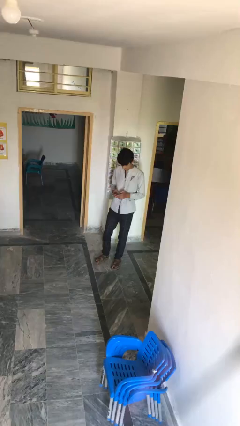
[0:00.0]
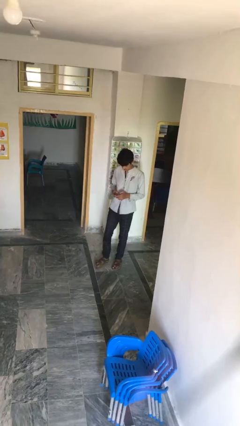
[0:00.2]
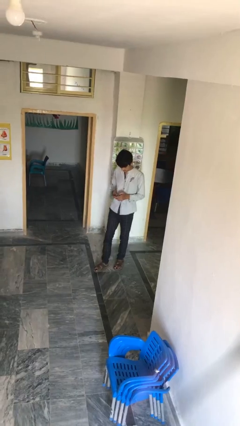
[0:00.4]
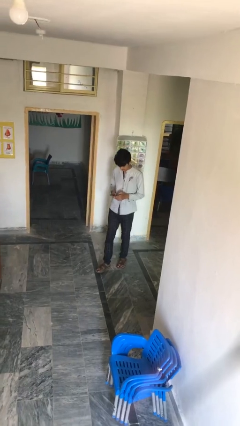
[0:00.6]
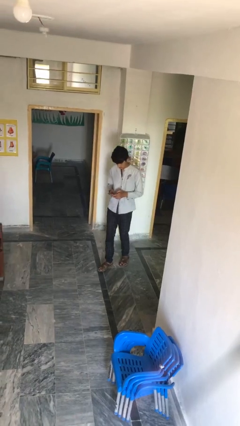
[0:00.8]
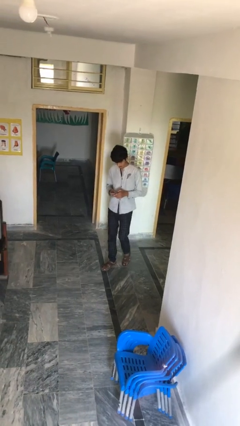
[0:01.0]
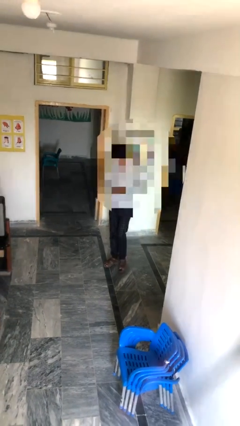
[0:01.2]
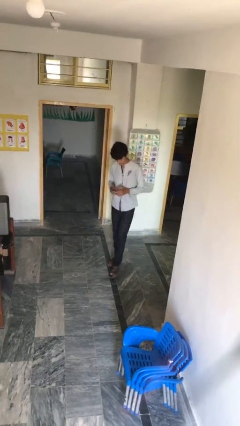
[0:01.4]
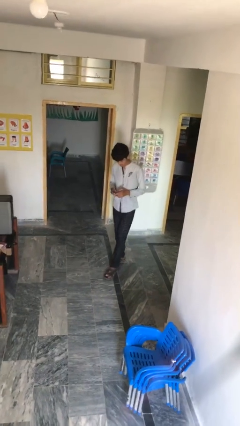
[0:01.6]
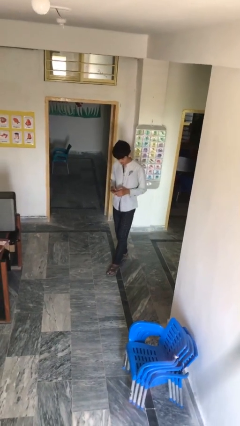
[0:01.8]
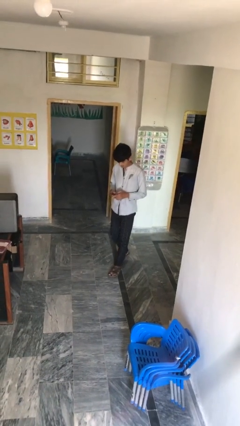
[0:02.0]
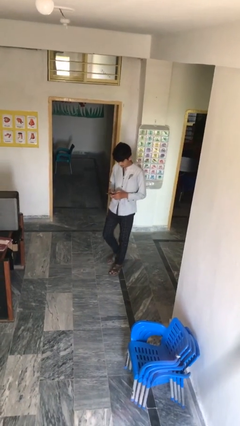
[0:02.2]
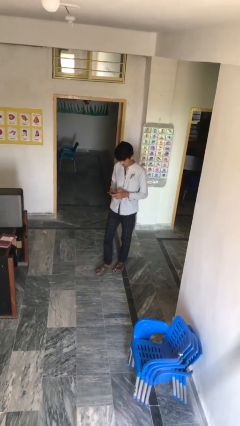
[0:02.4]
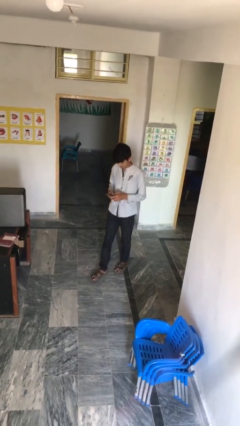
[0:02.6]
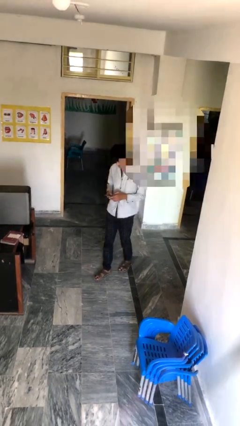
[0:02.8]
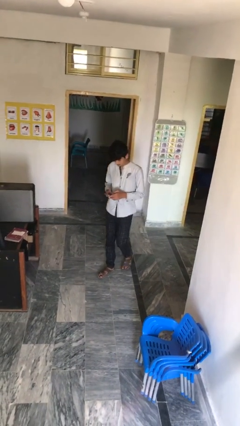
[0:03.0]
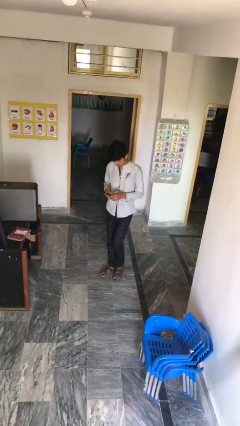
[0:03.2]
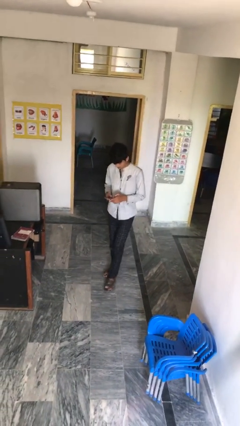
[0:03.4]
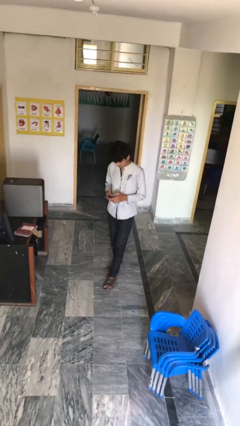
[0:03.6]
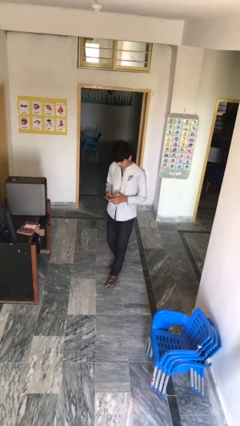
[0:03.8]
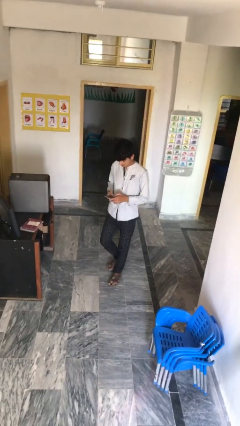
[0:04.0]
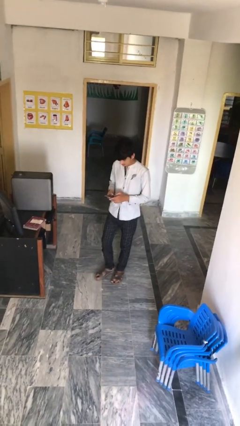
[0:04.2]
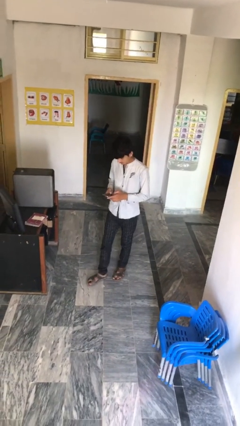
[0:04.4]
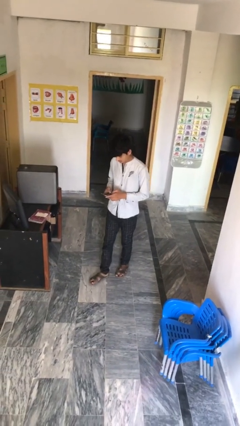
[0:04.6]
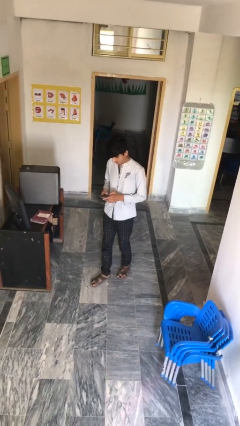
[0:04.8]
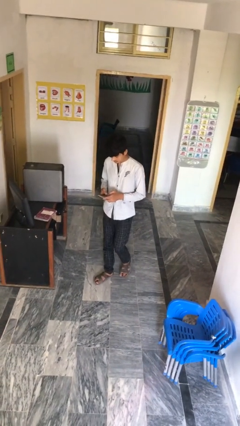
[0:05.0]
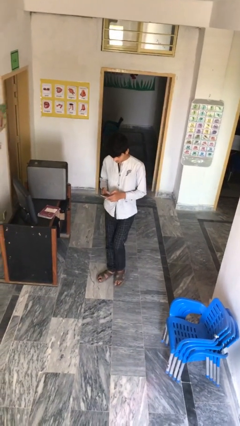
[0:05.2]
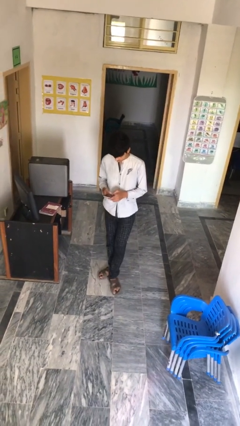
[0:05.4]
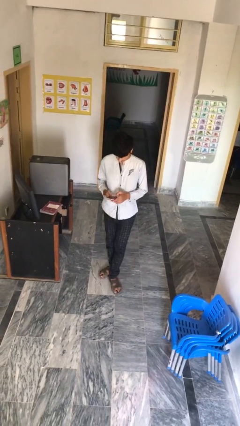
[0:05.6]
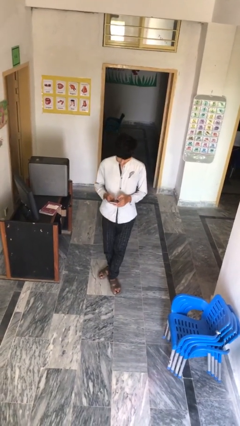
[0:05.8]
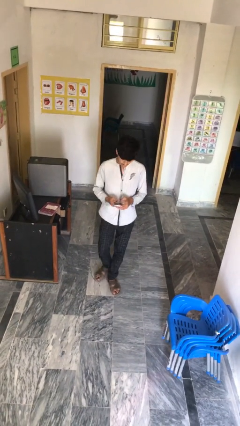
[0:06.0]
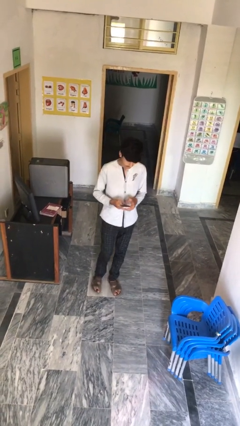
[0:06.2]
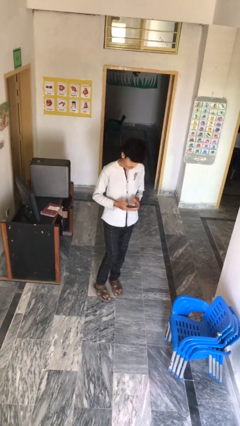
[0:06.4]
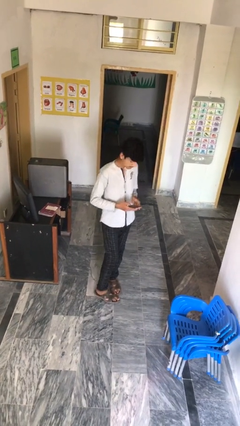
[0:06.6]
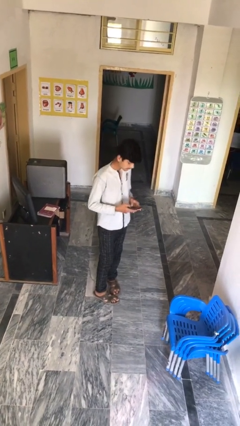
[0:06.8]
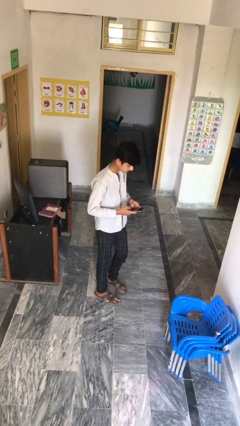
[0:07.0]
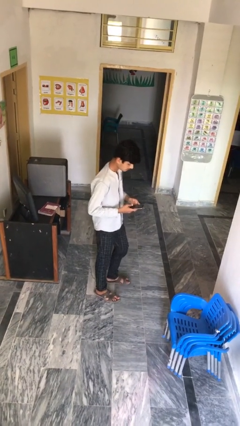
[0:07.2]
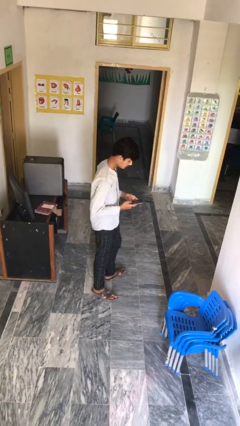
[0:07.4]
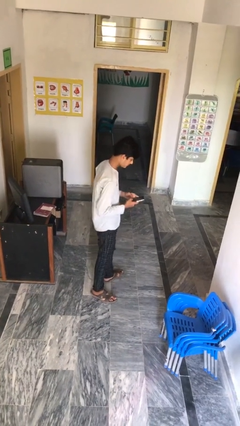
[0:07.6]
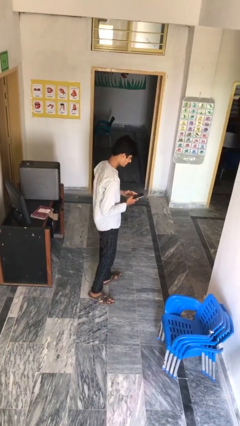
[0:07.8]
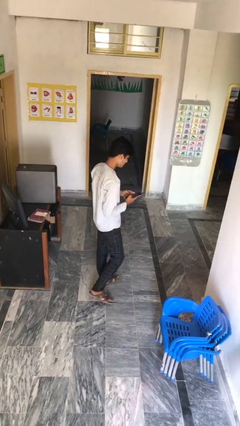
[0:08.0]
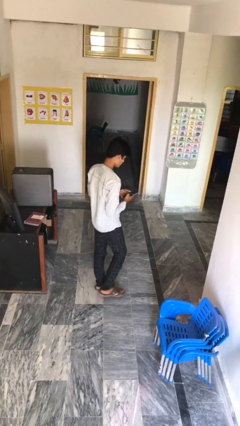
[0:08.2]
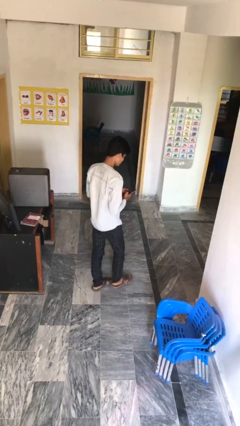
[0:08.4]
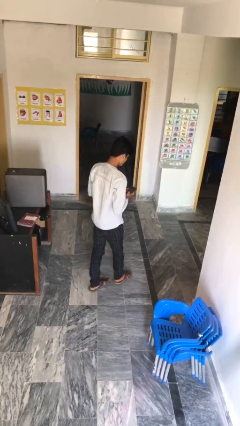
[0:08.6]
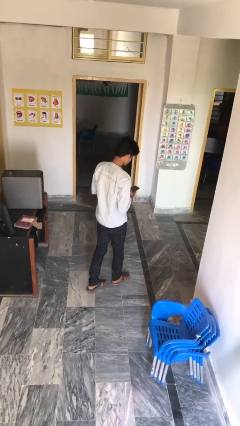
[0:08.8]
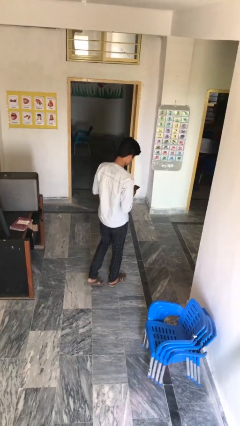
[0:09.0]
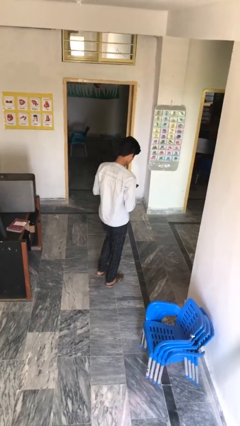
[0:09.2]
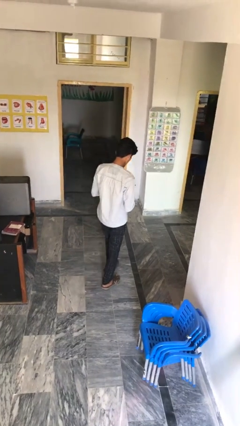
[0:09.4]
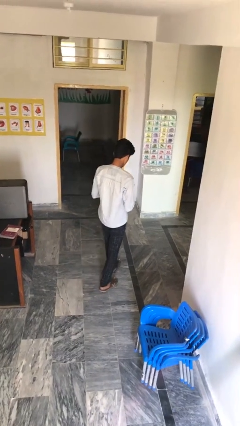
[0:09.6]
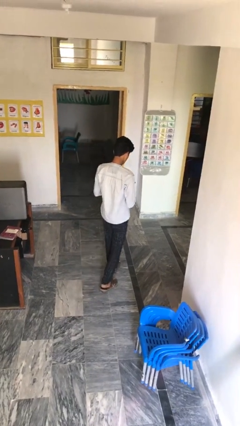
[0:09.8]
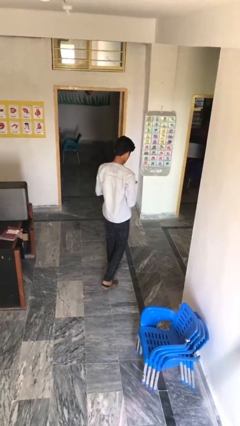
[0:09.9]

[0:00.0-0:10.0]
person texts on phone

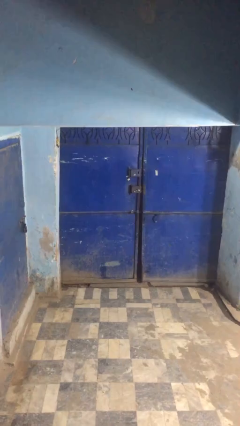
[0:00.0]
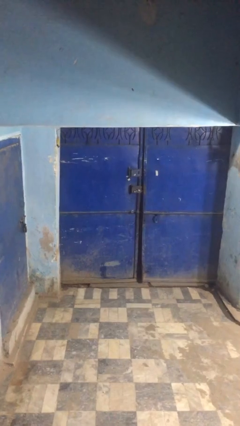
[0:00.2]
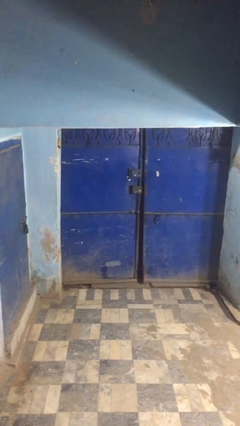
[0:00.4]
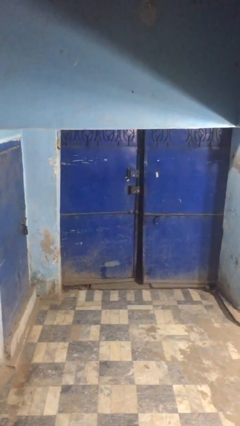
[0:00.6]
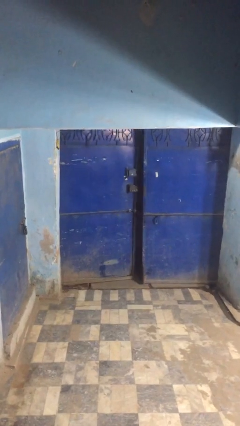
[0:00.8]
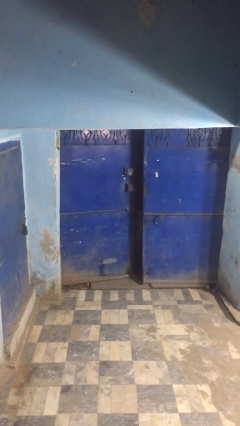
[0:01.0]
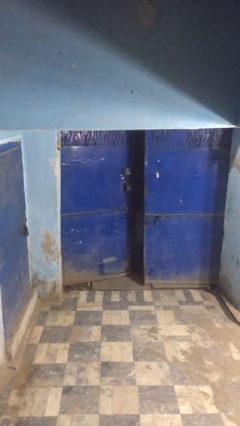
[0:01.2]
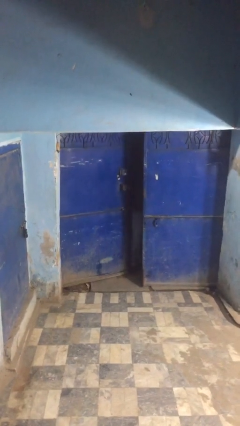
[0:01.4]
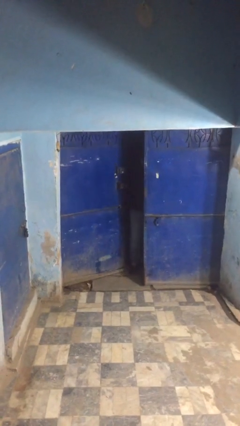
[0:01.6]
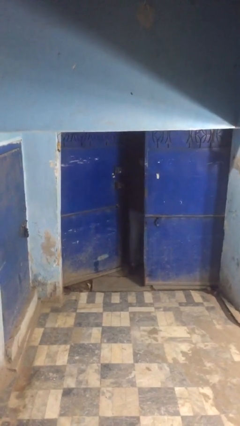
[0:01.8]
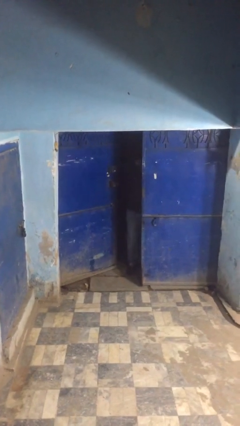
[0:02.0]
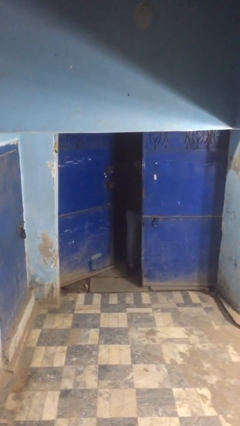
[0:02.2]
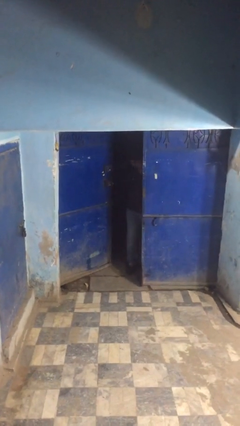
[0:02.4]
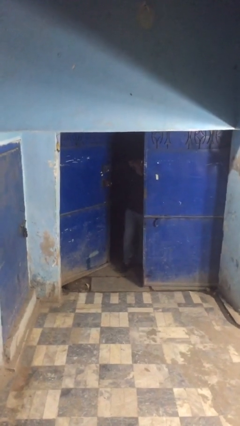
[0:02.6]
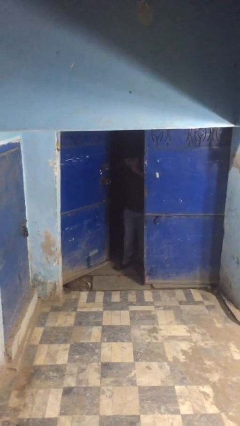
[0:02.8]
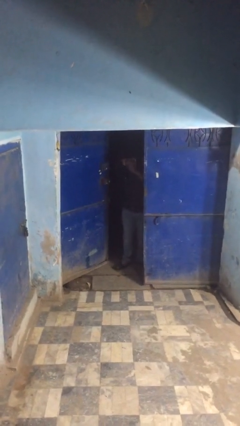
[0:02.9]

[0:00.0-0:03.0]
person opens facility door

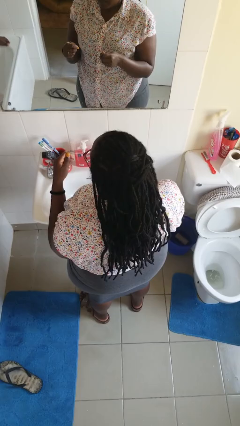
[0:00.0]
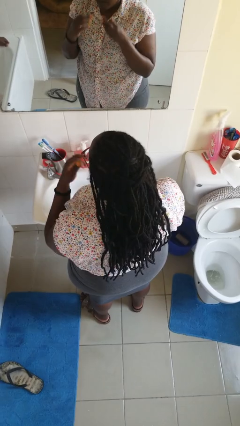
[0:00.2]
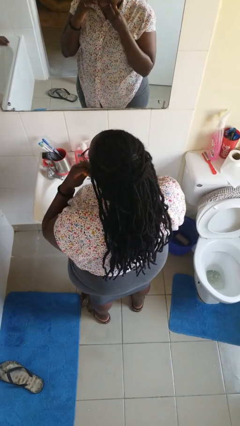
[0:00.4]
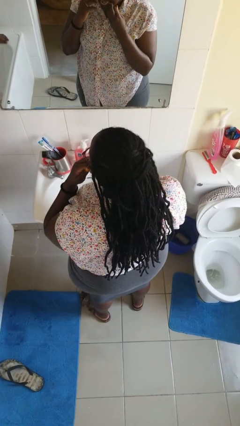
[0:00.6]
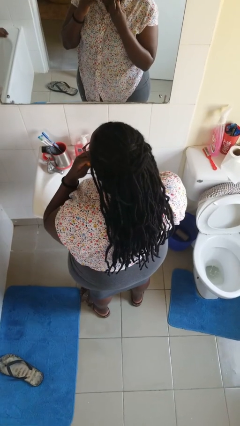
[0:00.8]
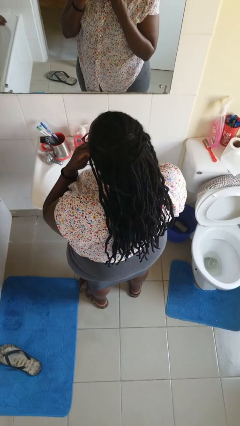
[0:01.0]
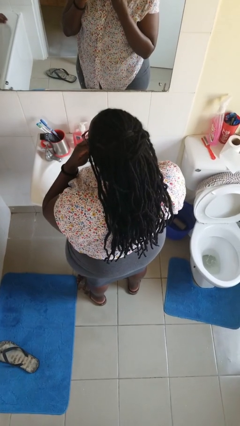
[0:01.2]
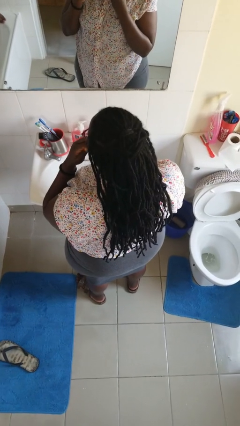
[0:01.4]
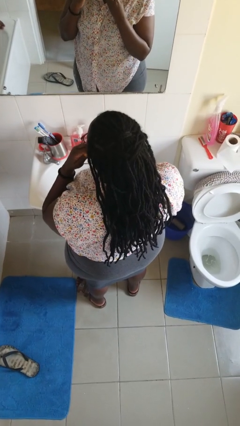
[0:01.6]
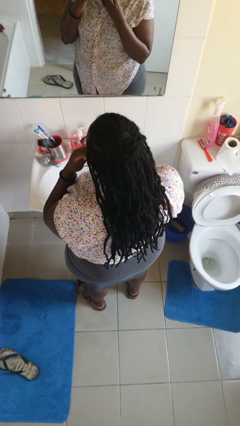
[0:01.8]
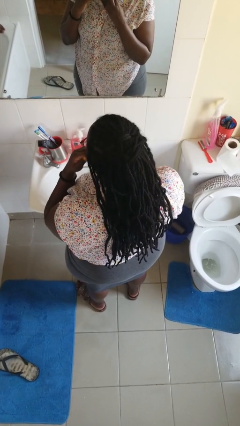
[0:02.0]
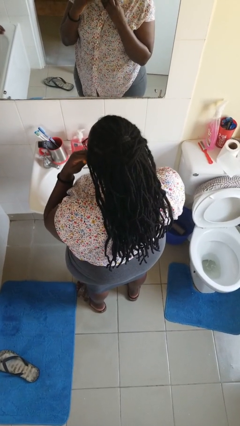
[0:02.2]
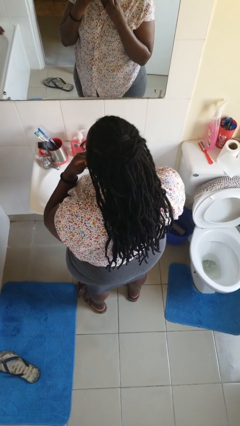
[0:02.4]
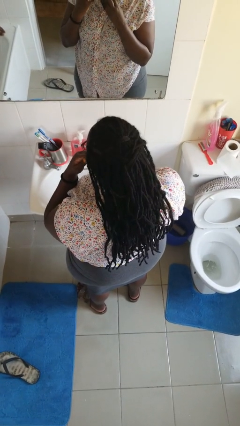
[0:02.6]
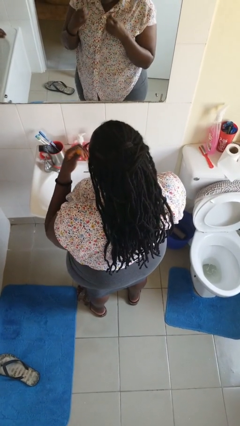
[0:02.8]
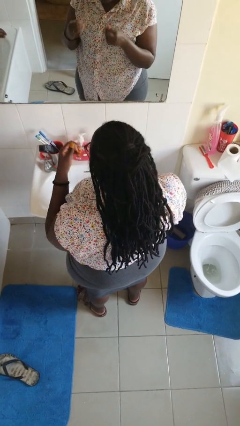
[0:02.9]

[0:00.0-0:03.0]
person flosses

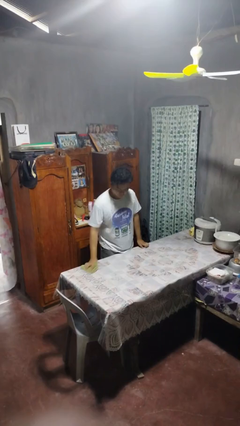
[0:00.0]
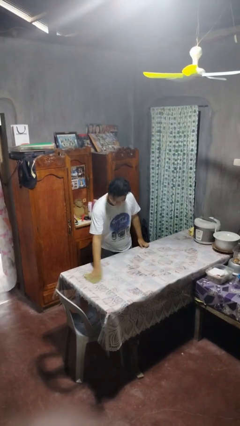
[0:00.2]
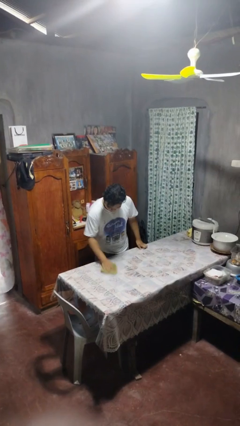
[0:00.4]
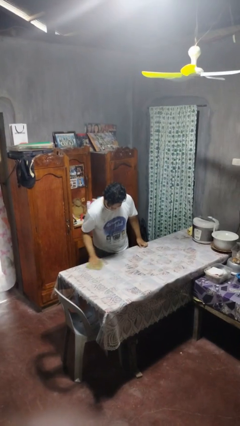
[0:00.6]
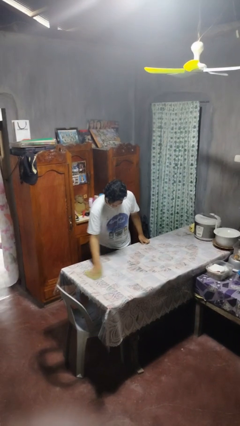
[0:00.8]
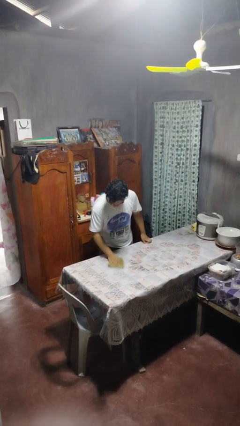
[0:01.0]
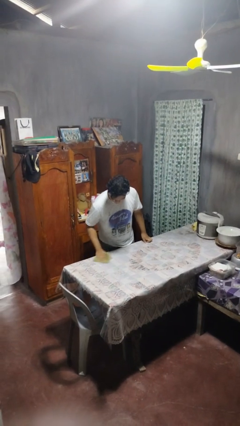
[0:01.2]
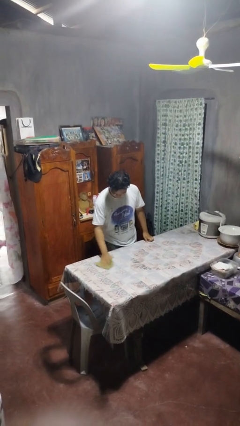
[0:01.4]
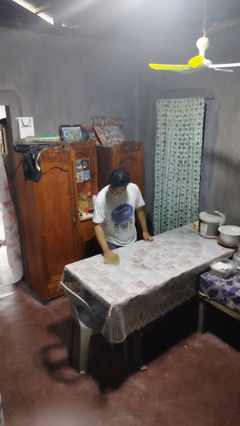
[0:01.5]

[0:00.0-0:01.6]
person cleans table with rag

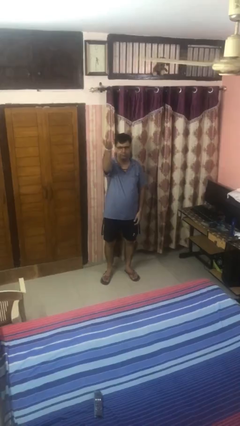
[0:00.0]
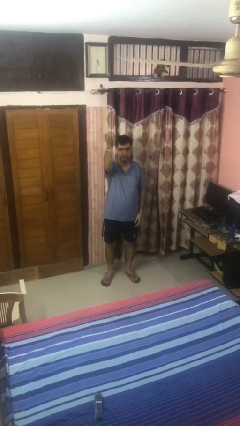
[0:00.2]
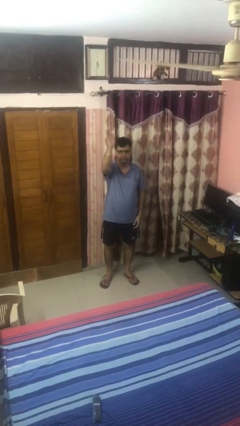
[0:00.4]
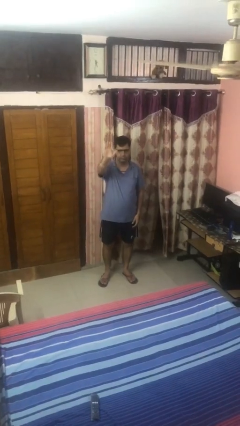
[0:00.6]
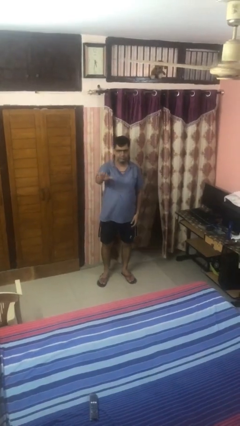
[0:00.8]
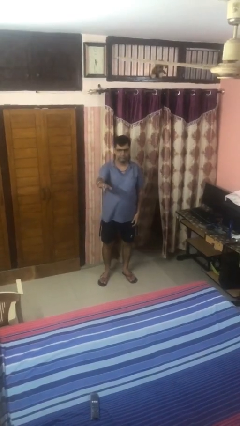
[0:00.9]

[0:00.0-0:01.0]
person gestures swipe down
